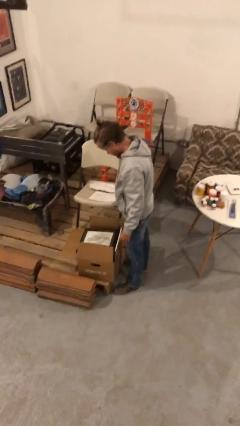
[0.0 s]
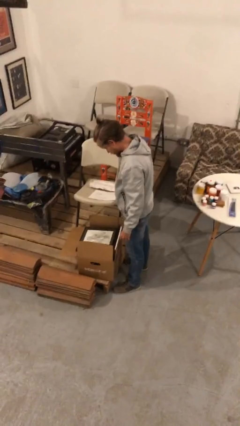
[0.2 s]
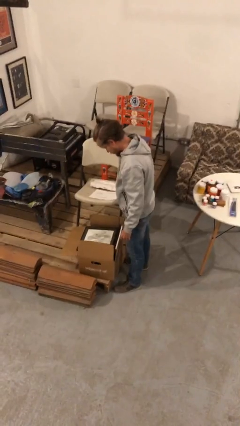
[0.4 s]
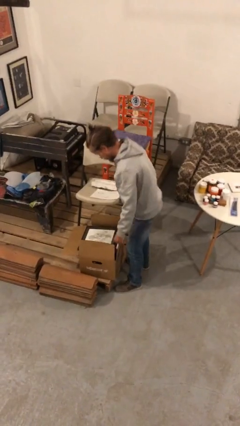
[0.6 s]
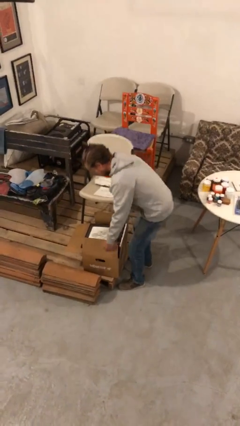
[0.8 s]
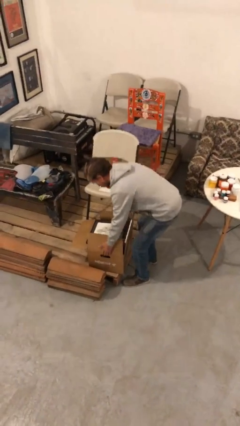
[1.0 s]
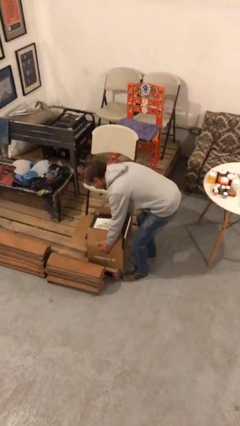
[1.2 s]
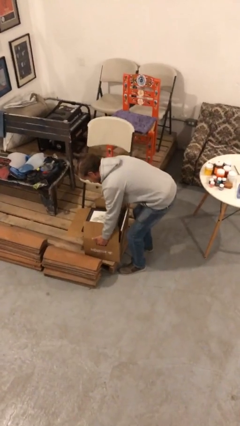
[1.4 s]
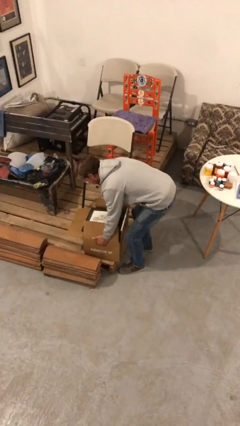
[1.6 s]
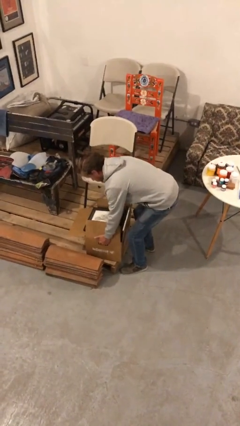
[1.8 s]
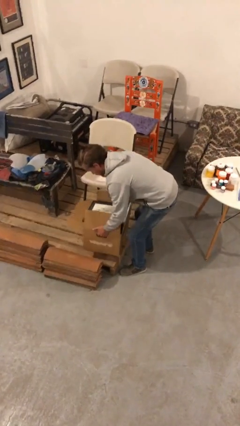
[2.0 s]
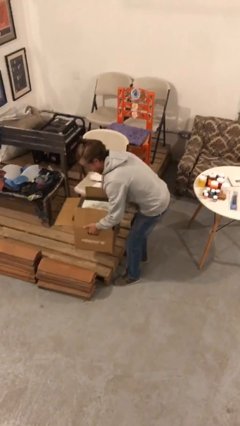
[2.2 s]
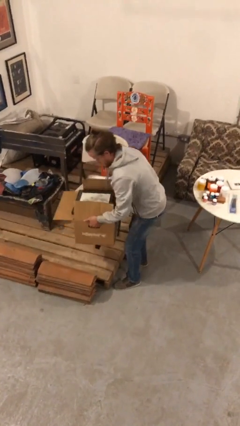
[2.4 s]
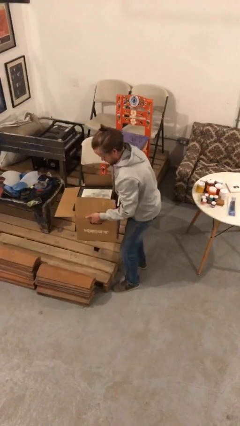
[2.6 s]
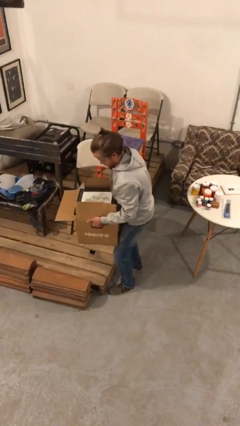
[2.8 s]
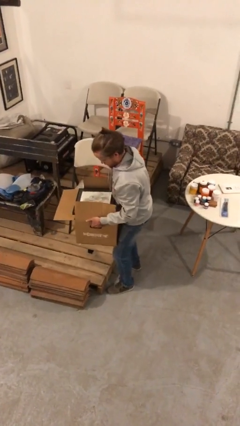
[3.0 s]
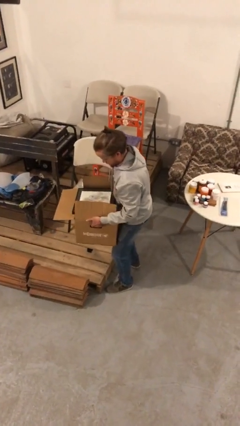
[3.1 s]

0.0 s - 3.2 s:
person picks up object from floor

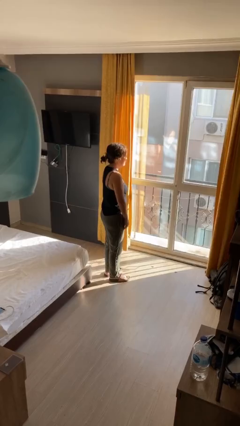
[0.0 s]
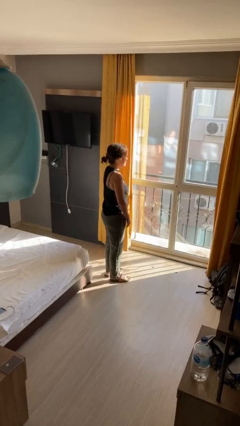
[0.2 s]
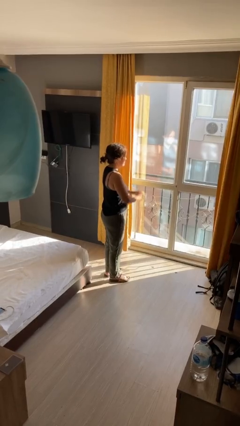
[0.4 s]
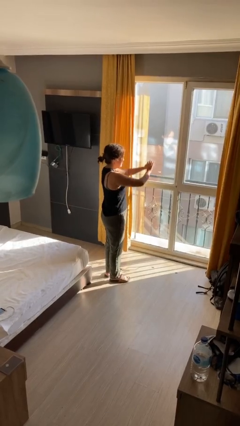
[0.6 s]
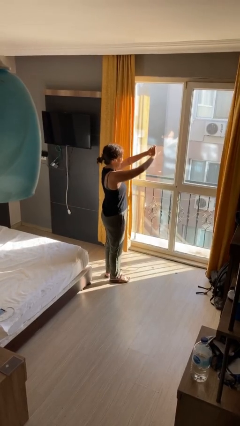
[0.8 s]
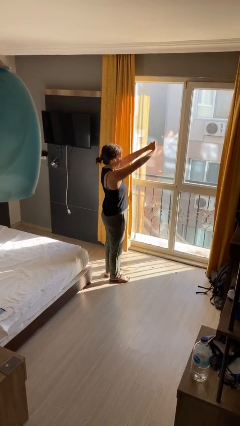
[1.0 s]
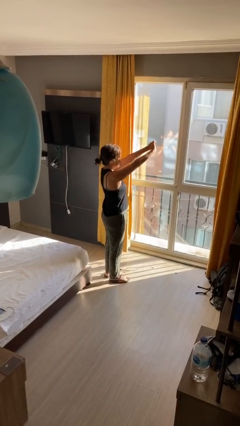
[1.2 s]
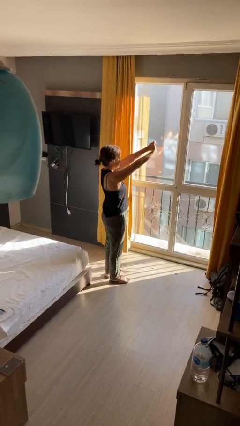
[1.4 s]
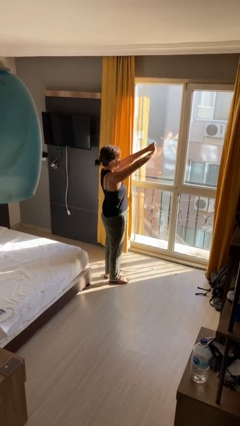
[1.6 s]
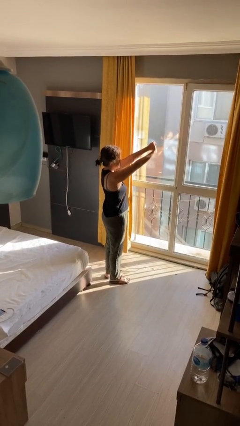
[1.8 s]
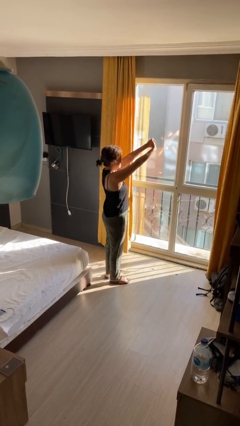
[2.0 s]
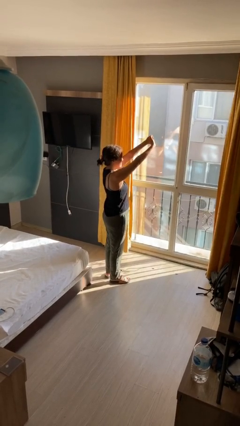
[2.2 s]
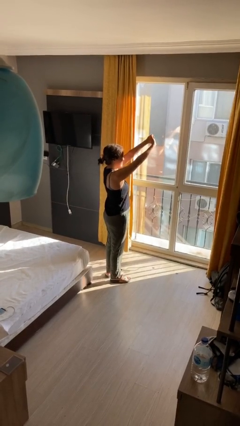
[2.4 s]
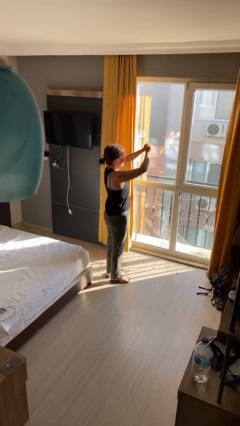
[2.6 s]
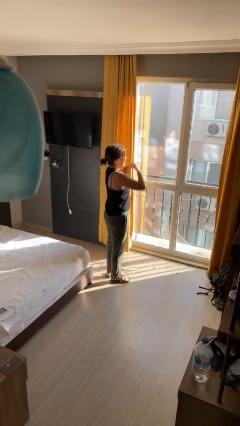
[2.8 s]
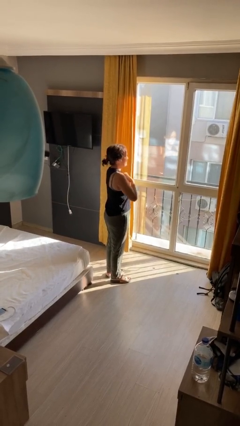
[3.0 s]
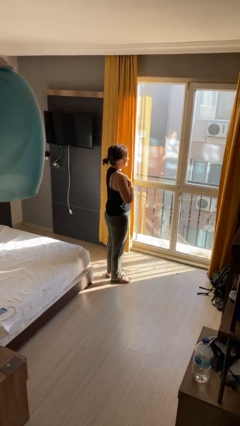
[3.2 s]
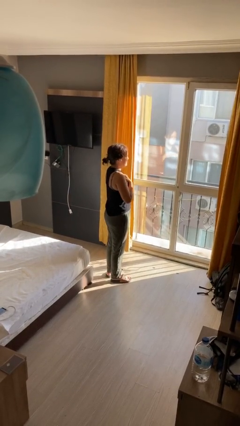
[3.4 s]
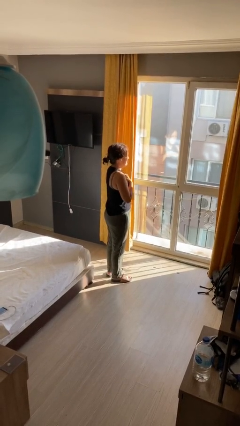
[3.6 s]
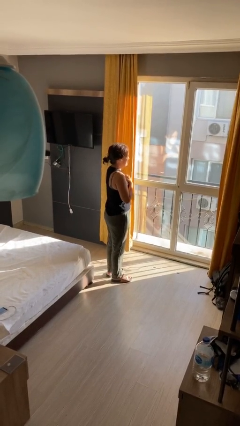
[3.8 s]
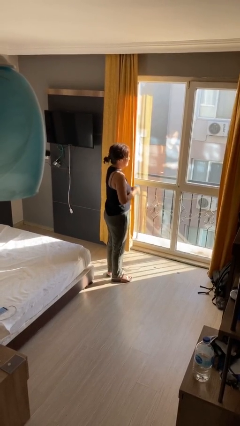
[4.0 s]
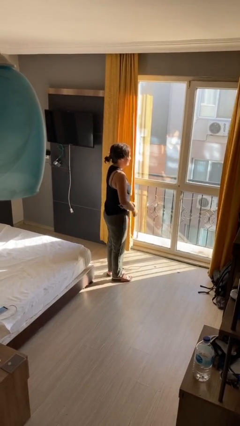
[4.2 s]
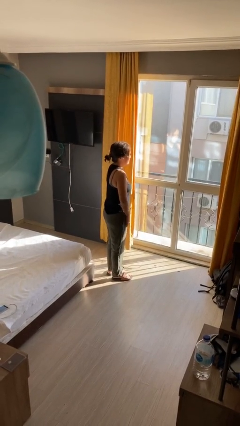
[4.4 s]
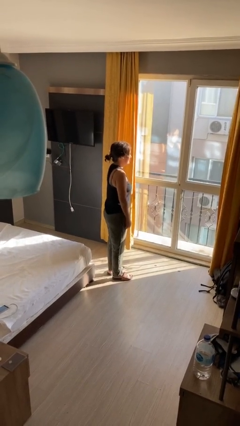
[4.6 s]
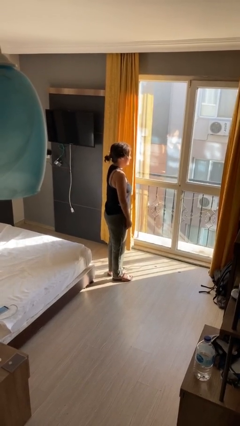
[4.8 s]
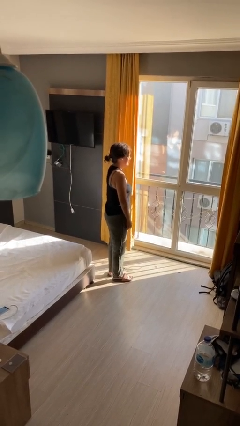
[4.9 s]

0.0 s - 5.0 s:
person prays

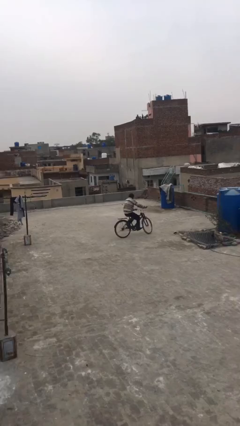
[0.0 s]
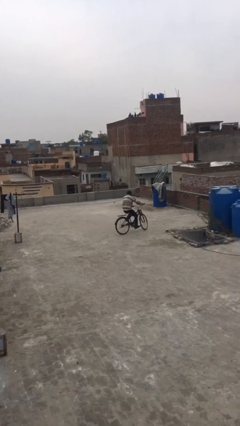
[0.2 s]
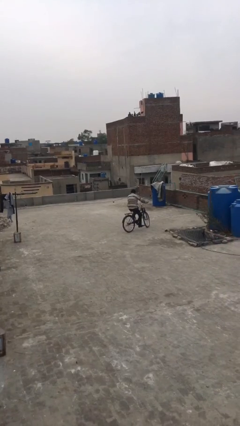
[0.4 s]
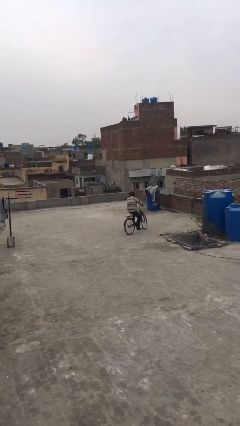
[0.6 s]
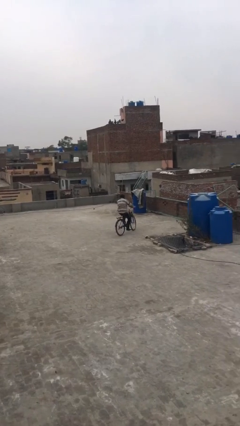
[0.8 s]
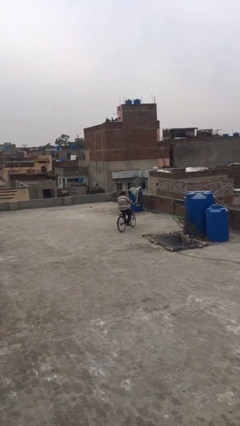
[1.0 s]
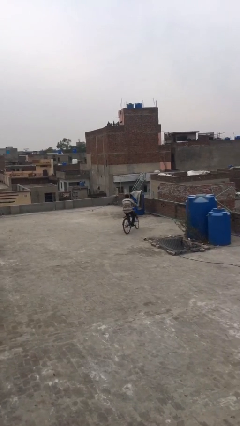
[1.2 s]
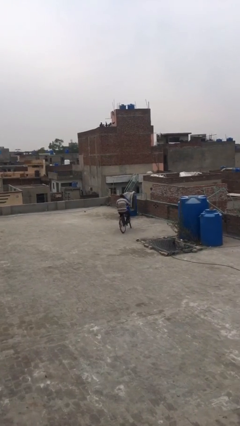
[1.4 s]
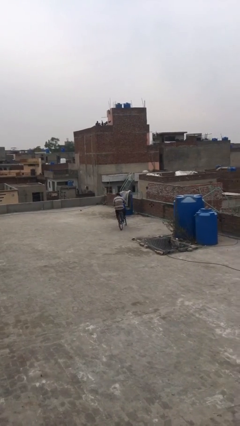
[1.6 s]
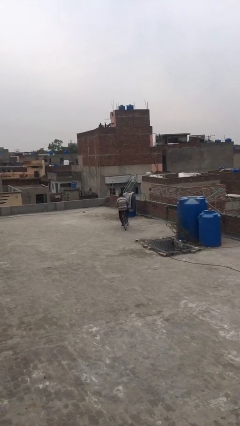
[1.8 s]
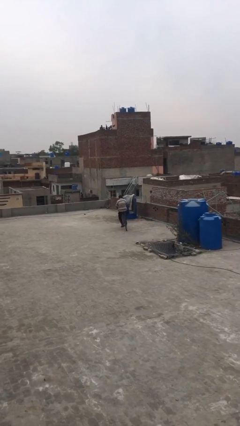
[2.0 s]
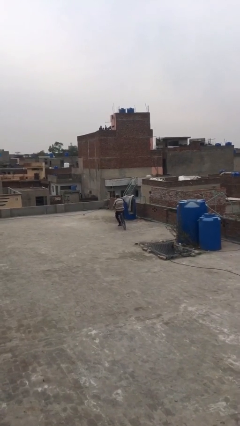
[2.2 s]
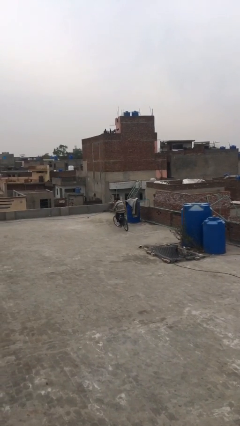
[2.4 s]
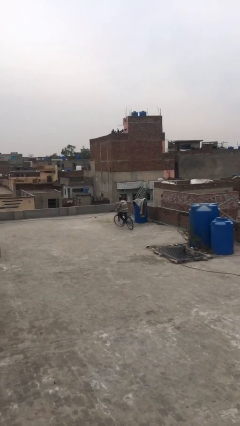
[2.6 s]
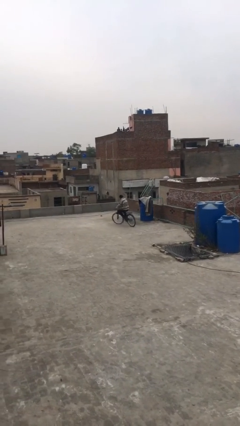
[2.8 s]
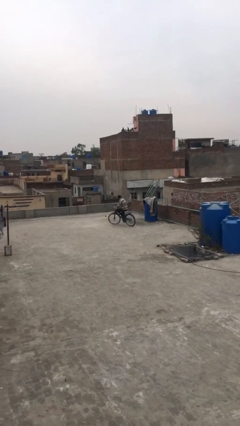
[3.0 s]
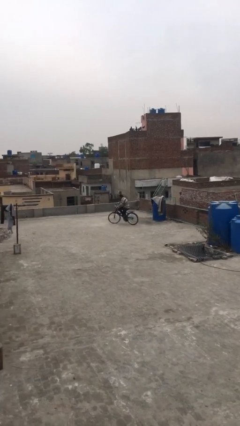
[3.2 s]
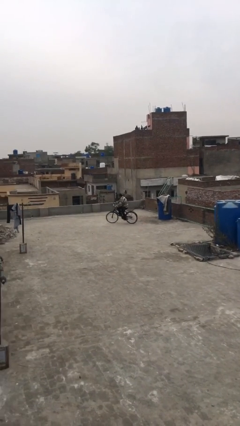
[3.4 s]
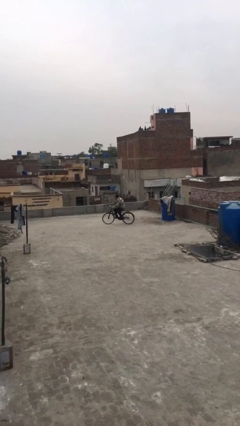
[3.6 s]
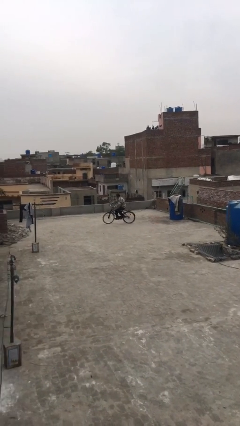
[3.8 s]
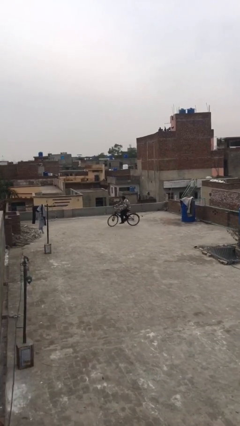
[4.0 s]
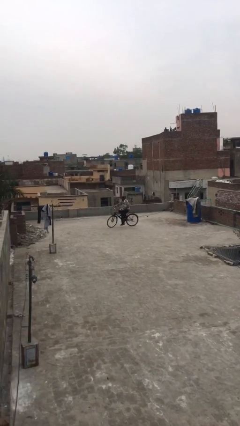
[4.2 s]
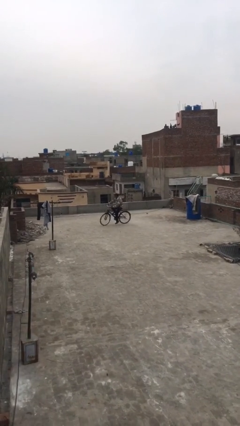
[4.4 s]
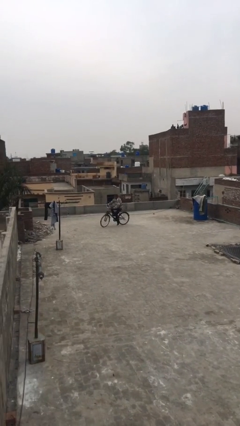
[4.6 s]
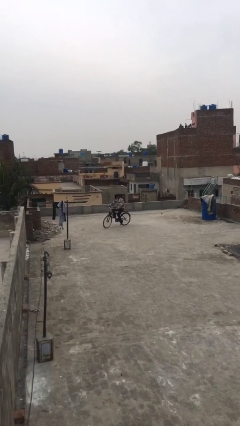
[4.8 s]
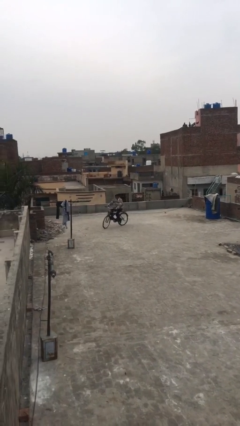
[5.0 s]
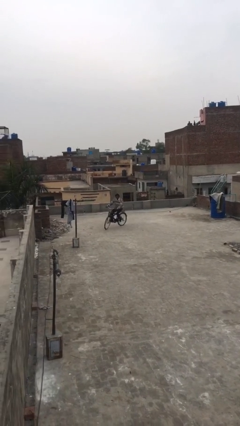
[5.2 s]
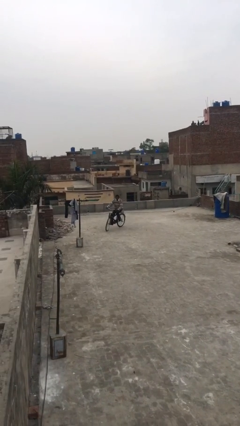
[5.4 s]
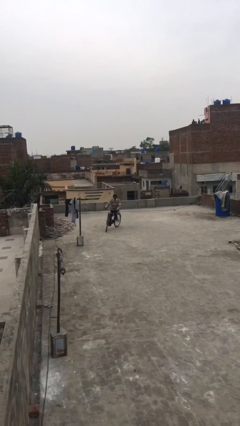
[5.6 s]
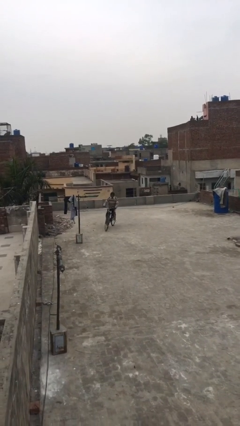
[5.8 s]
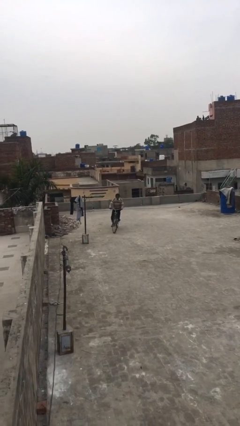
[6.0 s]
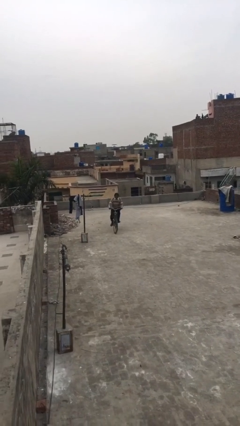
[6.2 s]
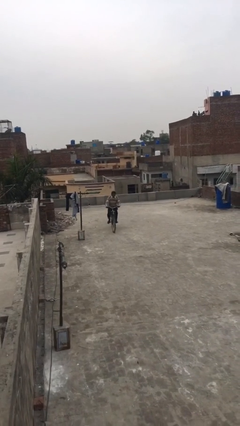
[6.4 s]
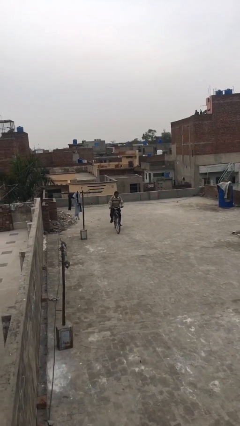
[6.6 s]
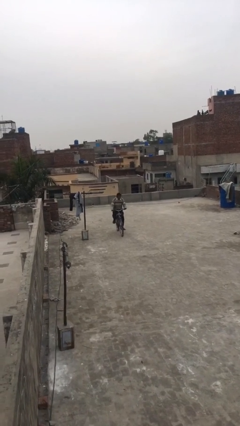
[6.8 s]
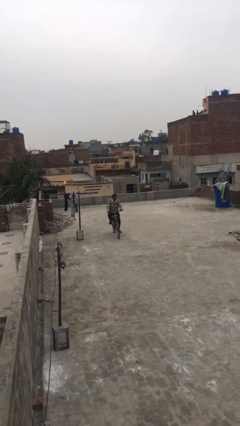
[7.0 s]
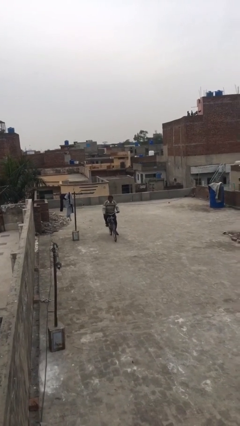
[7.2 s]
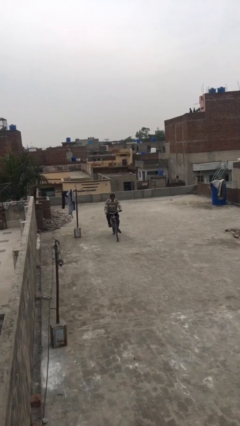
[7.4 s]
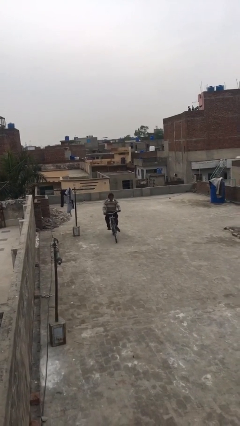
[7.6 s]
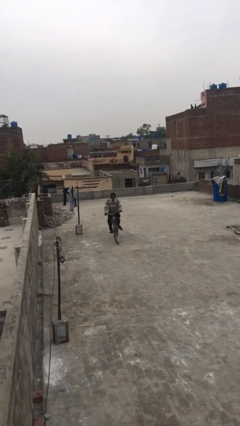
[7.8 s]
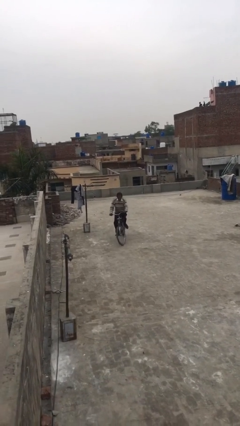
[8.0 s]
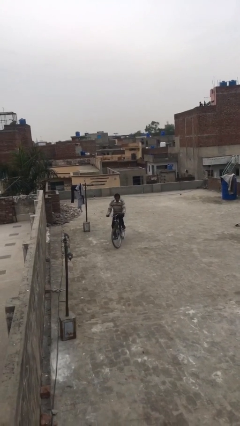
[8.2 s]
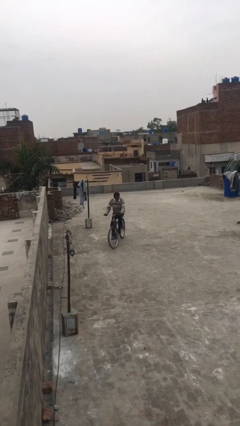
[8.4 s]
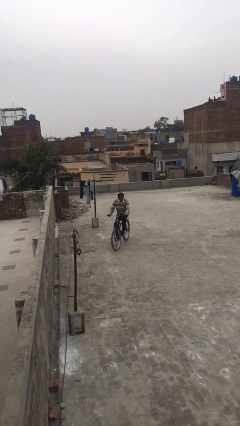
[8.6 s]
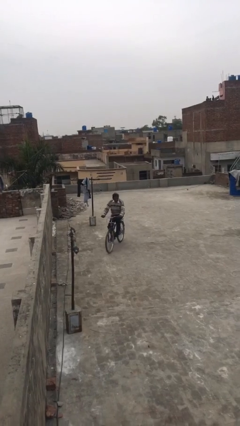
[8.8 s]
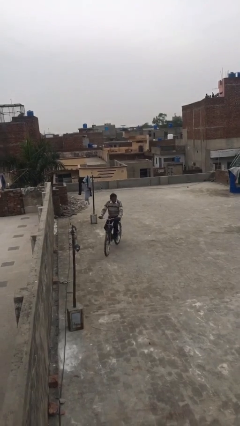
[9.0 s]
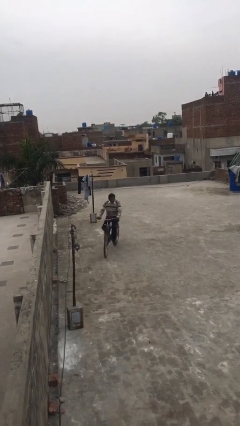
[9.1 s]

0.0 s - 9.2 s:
person rides bicycle

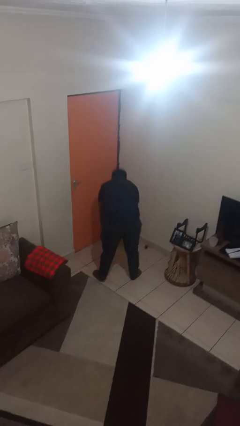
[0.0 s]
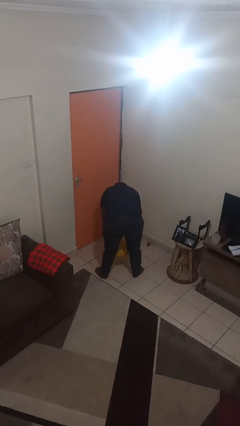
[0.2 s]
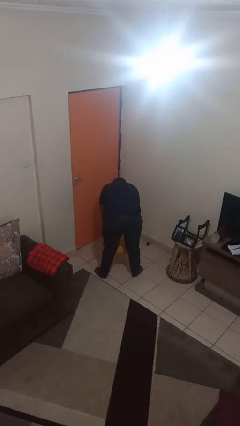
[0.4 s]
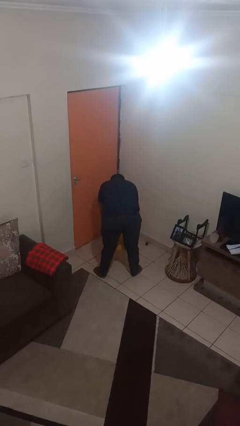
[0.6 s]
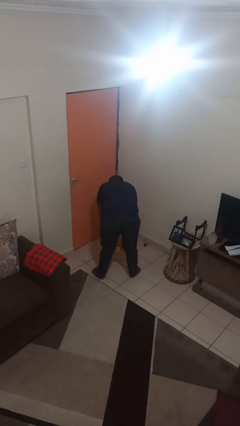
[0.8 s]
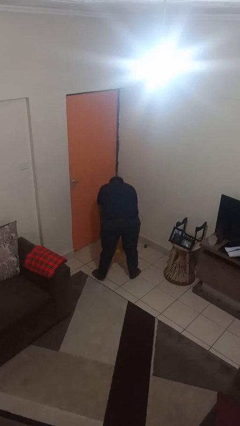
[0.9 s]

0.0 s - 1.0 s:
person catches dropped object
